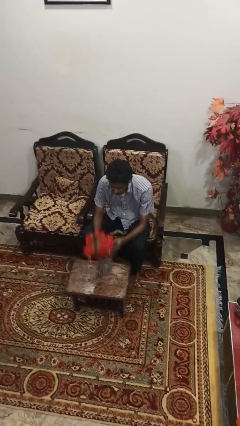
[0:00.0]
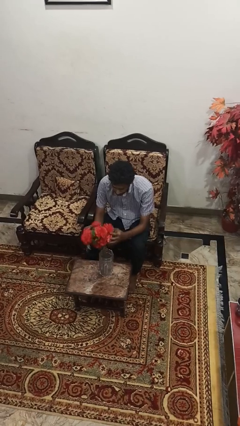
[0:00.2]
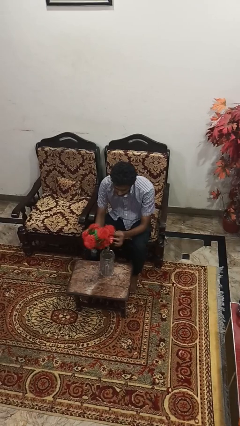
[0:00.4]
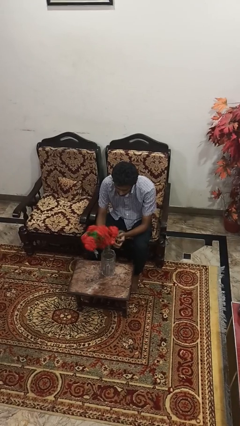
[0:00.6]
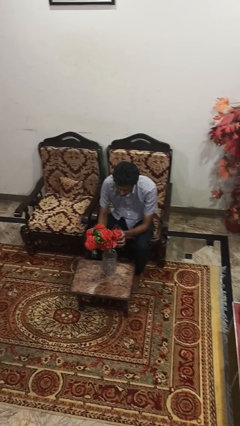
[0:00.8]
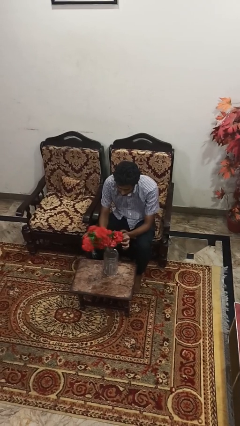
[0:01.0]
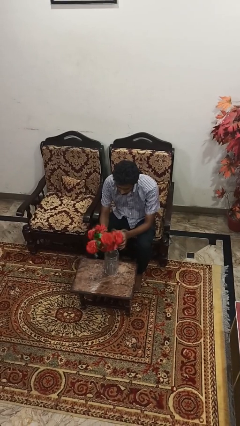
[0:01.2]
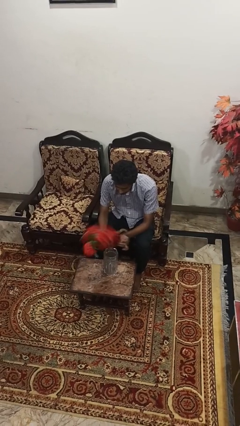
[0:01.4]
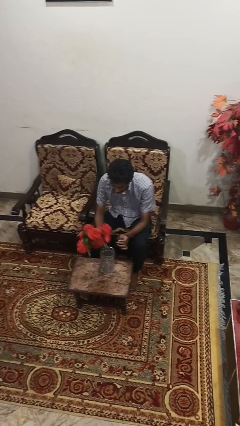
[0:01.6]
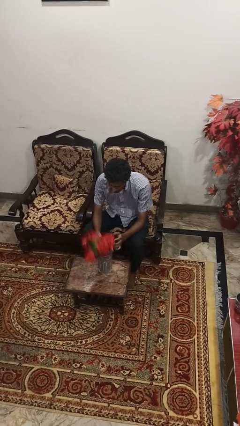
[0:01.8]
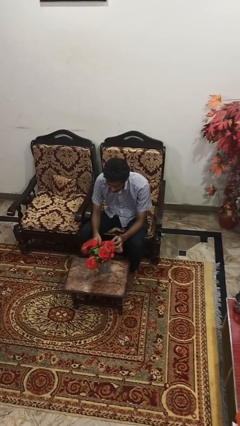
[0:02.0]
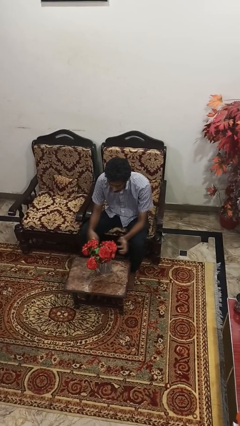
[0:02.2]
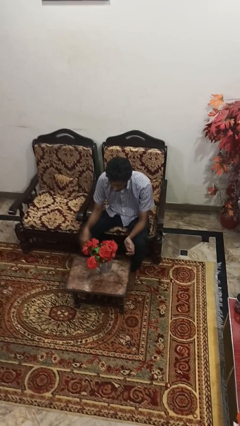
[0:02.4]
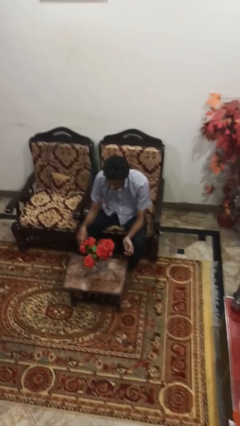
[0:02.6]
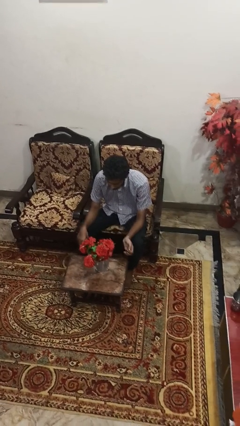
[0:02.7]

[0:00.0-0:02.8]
person arranges flowers in vase

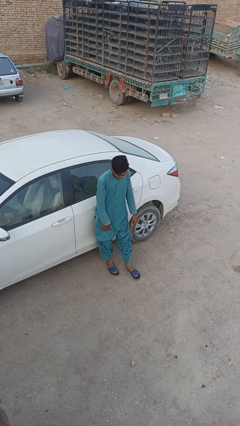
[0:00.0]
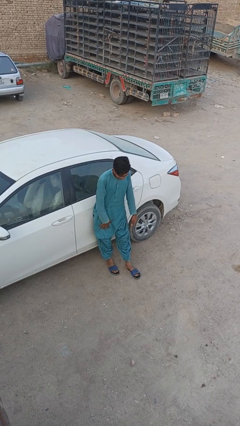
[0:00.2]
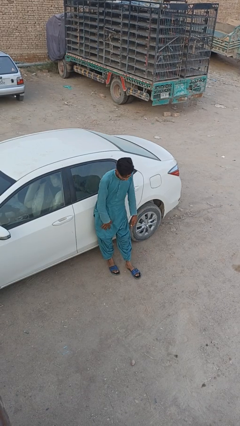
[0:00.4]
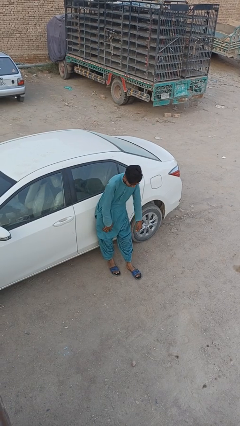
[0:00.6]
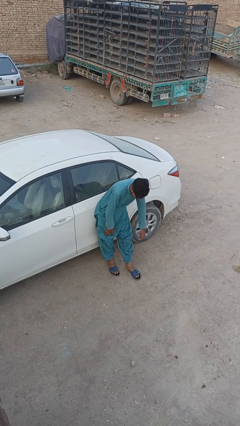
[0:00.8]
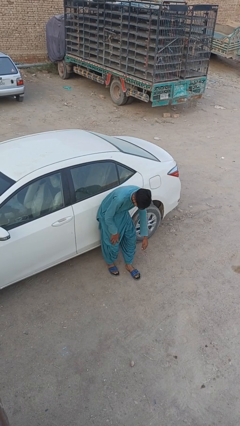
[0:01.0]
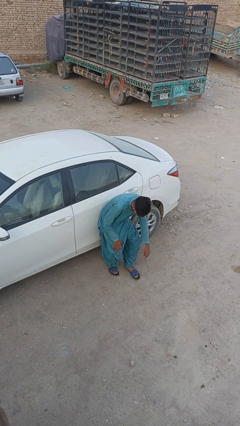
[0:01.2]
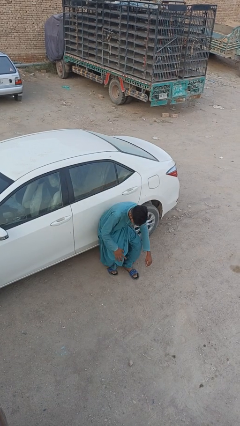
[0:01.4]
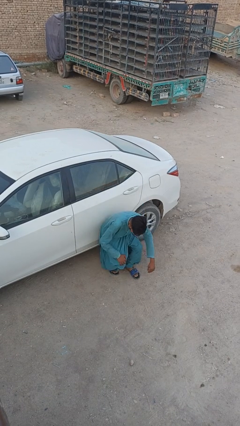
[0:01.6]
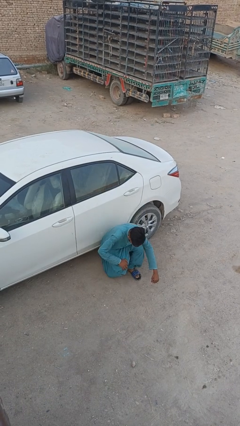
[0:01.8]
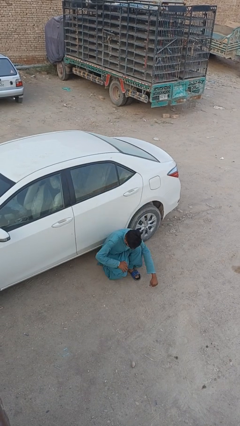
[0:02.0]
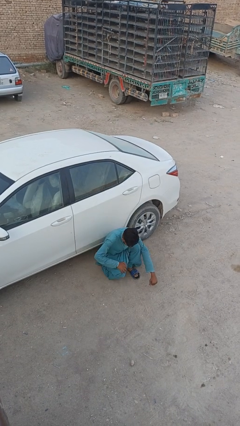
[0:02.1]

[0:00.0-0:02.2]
person leans against car

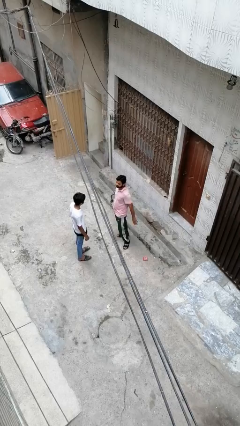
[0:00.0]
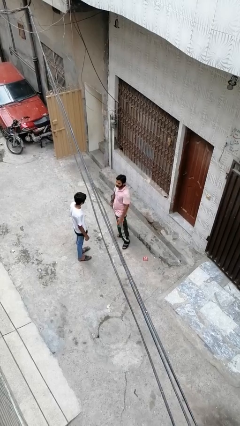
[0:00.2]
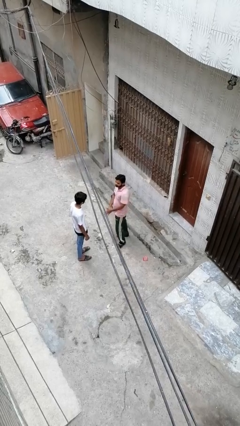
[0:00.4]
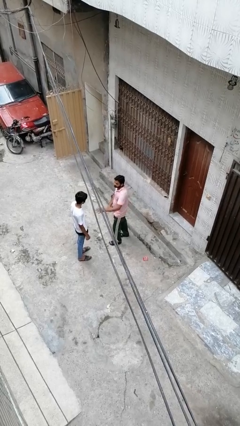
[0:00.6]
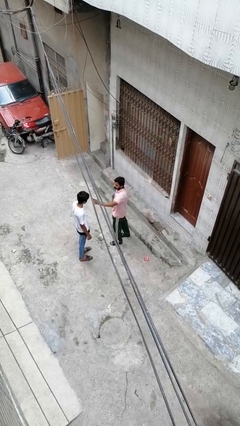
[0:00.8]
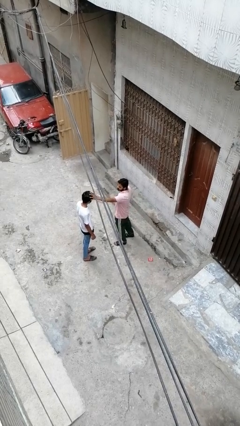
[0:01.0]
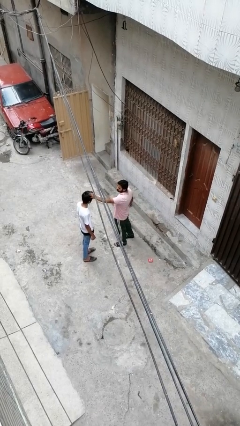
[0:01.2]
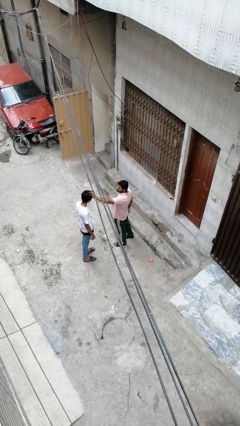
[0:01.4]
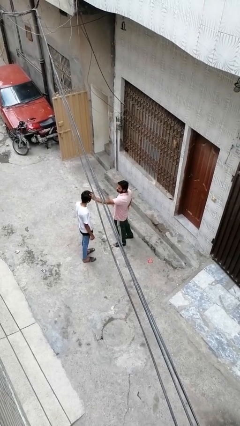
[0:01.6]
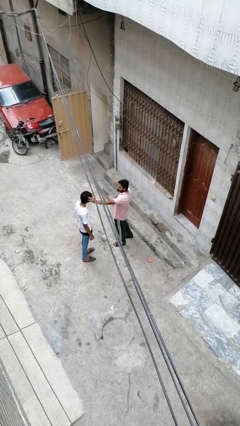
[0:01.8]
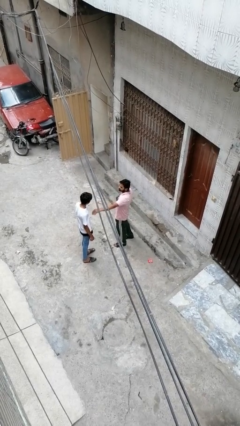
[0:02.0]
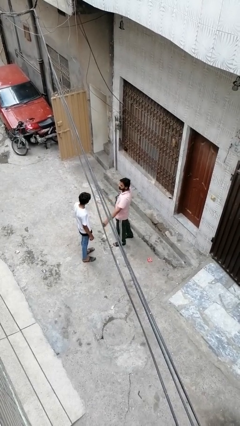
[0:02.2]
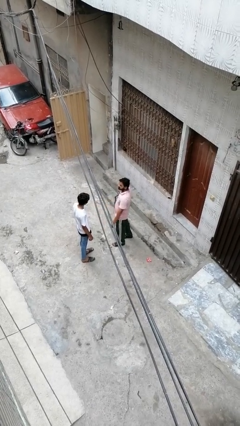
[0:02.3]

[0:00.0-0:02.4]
person grabs person by hair

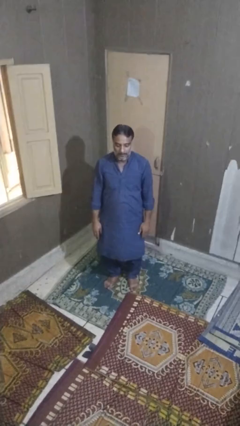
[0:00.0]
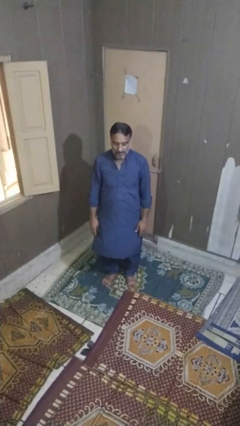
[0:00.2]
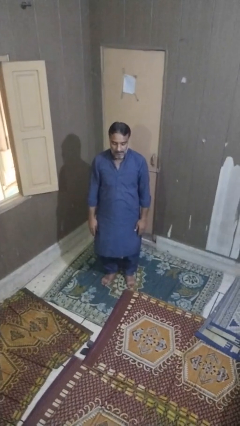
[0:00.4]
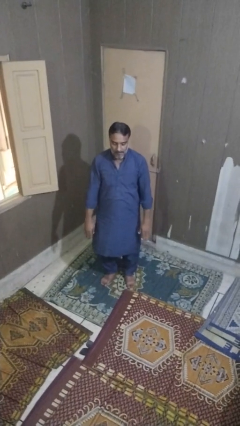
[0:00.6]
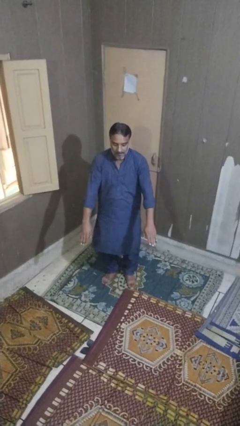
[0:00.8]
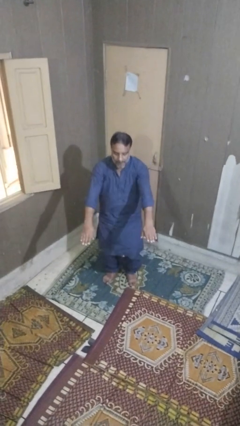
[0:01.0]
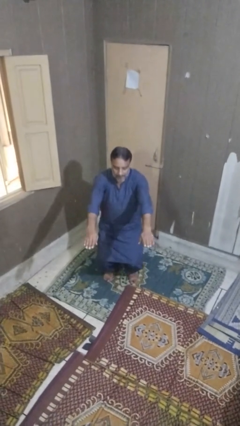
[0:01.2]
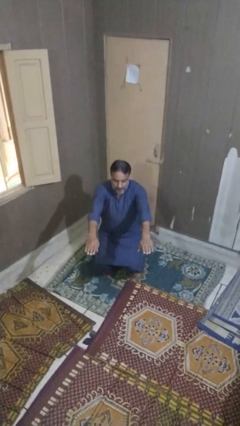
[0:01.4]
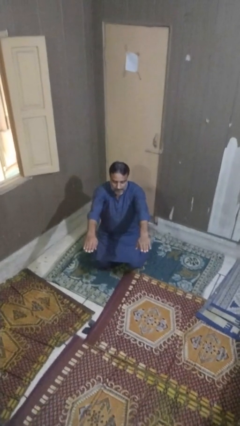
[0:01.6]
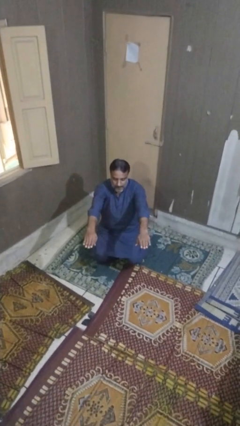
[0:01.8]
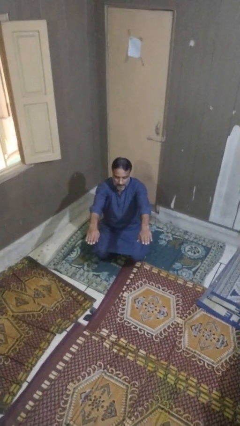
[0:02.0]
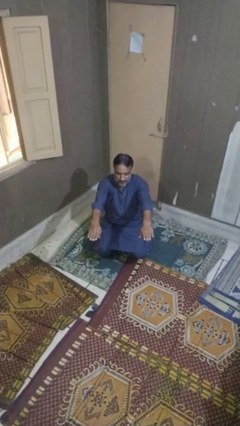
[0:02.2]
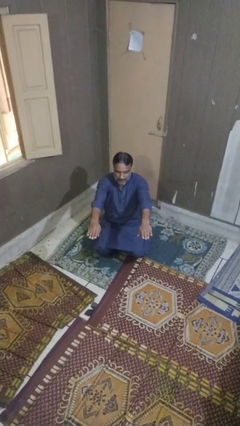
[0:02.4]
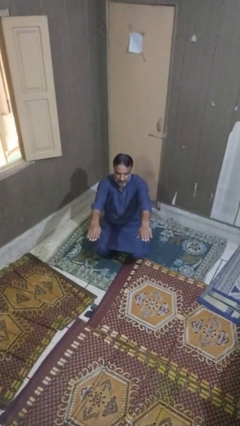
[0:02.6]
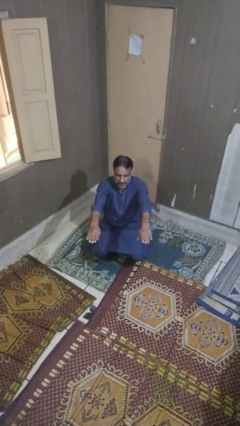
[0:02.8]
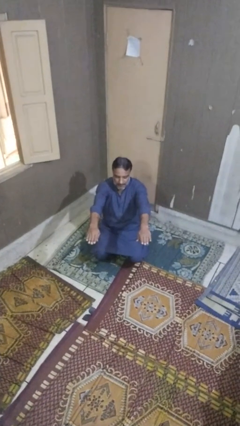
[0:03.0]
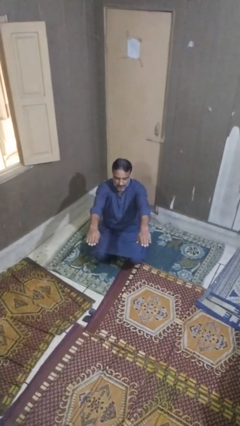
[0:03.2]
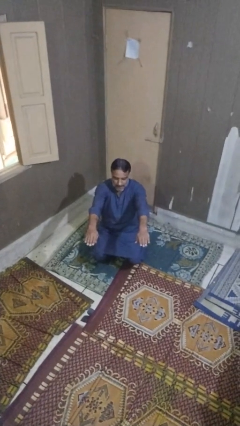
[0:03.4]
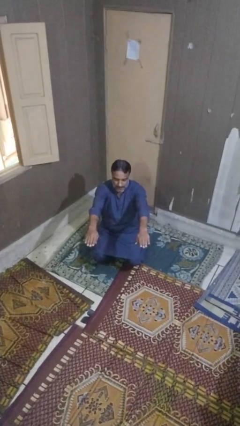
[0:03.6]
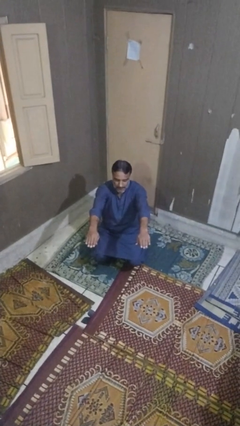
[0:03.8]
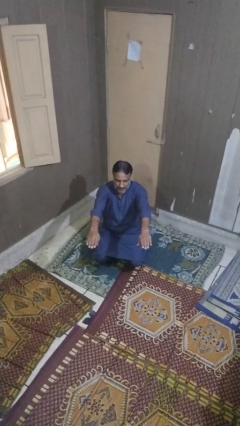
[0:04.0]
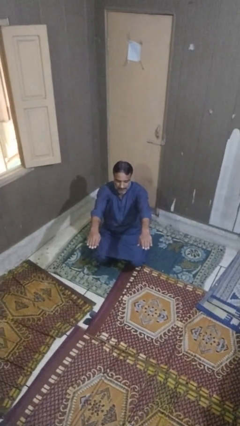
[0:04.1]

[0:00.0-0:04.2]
person squats

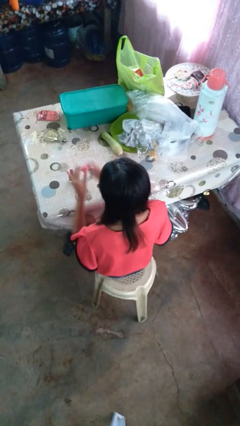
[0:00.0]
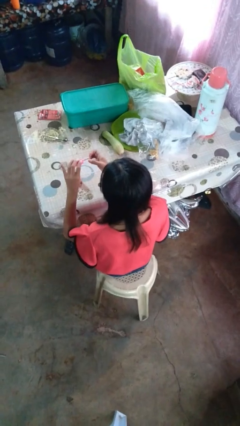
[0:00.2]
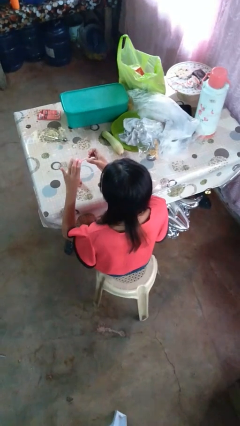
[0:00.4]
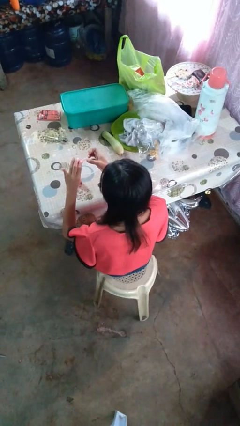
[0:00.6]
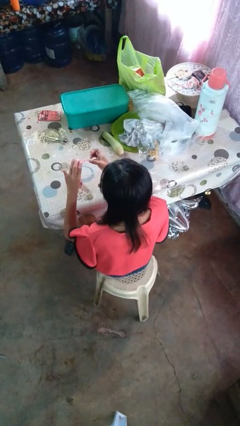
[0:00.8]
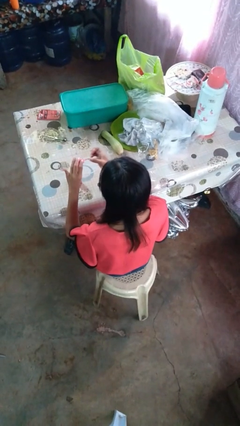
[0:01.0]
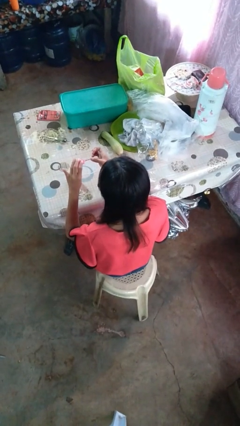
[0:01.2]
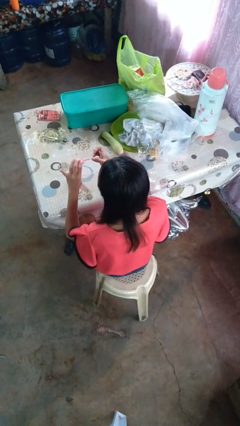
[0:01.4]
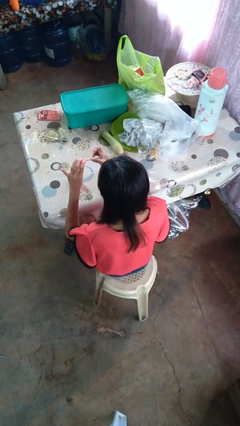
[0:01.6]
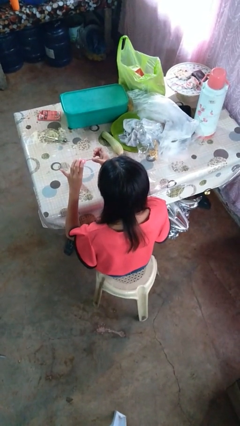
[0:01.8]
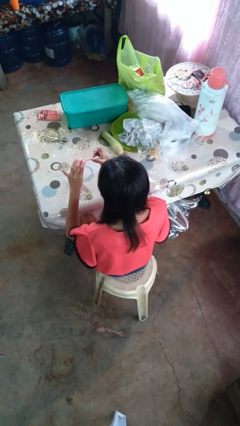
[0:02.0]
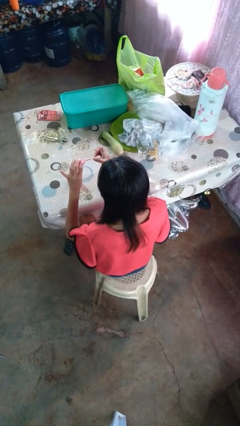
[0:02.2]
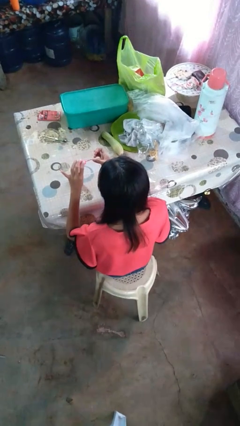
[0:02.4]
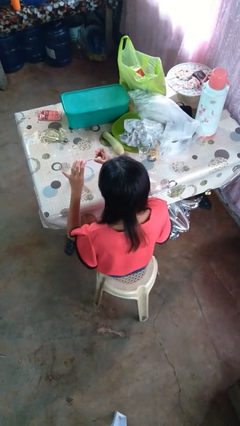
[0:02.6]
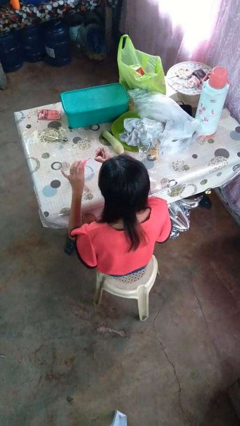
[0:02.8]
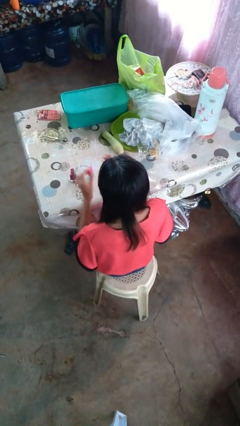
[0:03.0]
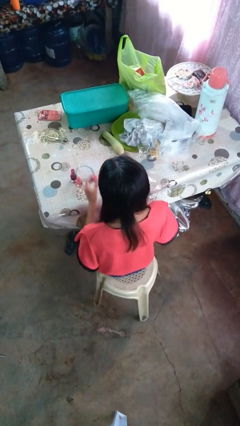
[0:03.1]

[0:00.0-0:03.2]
person paints fingernails

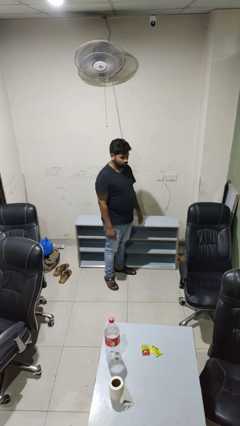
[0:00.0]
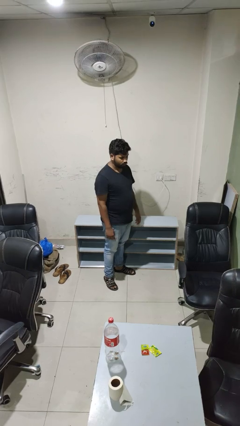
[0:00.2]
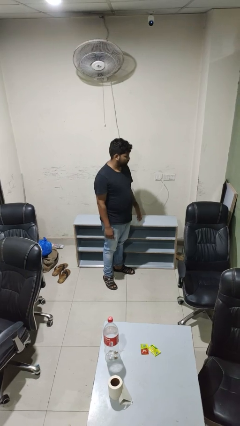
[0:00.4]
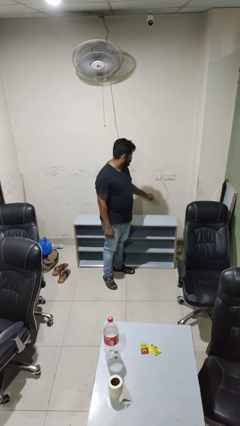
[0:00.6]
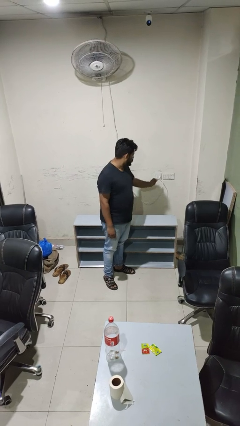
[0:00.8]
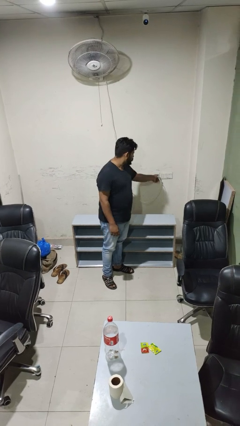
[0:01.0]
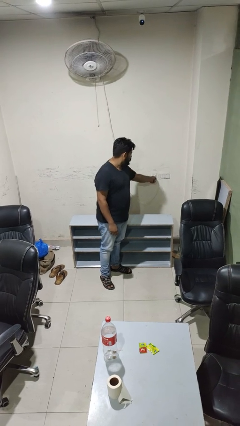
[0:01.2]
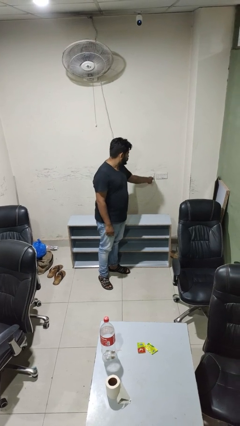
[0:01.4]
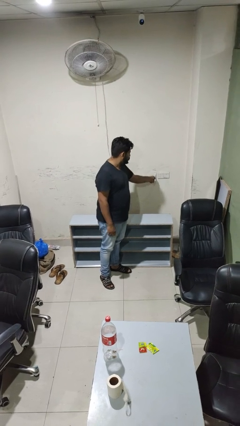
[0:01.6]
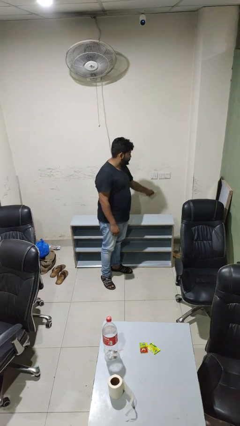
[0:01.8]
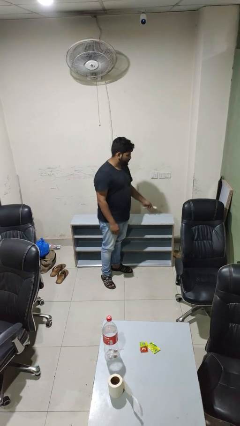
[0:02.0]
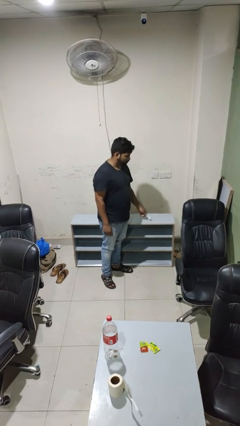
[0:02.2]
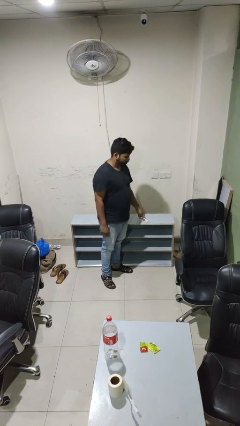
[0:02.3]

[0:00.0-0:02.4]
person unplugs from electrical socket
